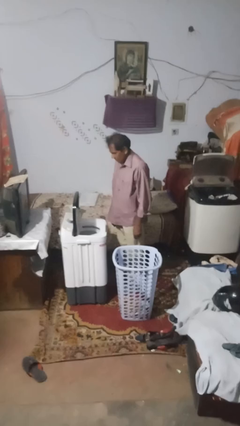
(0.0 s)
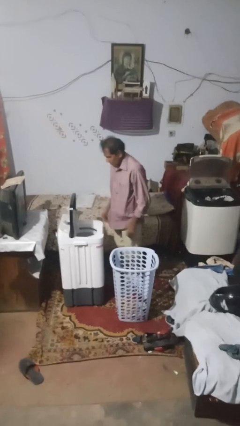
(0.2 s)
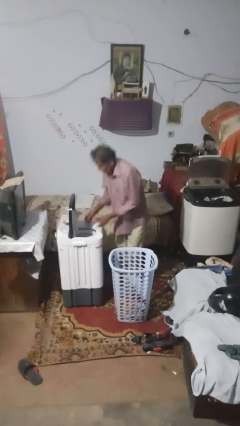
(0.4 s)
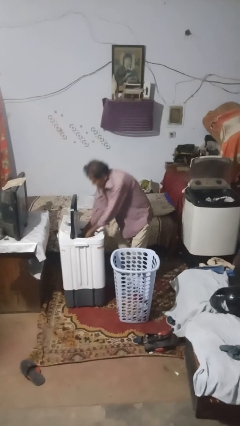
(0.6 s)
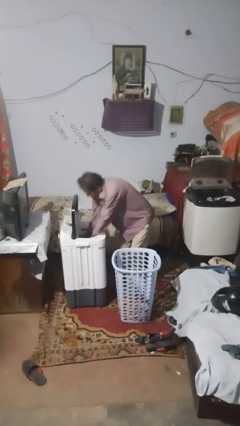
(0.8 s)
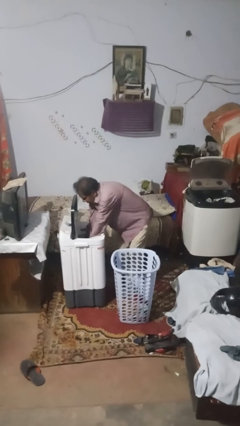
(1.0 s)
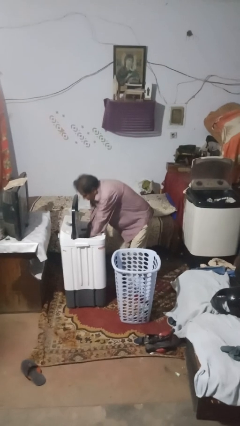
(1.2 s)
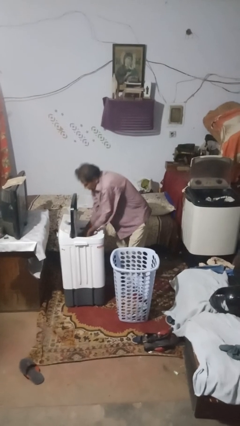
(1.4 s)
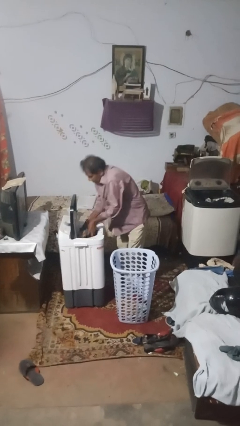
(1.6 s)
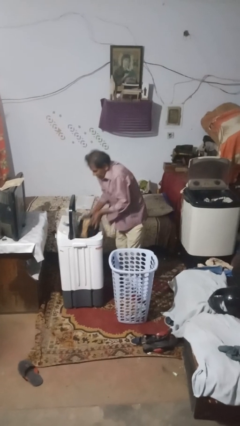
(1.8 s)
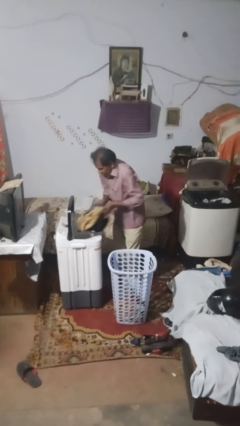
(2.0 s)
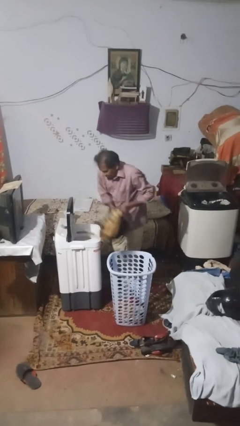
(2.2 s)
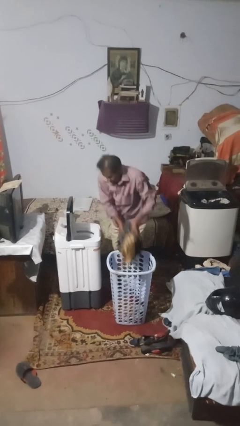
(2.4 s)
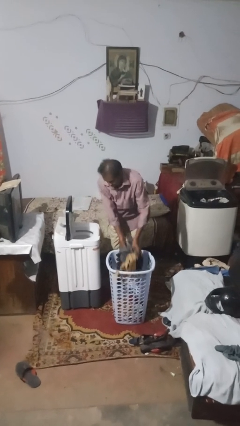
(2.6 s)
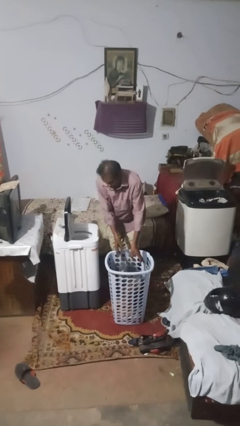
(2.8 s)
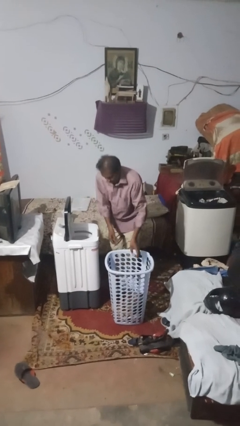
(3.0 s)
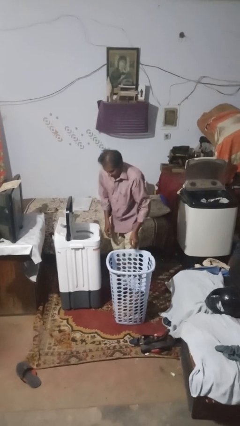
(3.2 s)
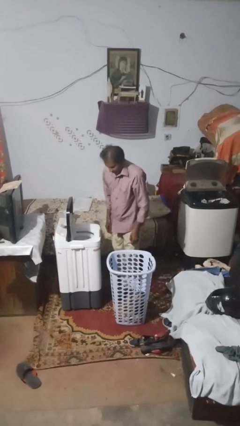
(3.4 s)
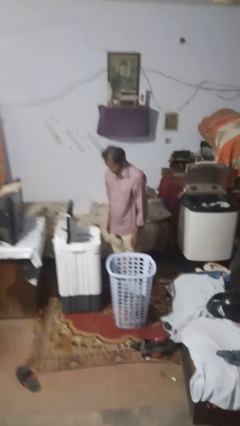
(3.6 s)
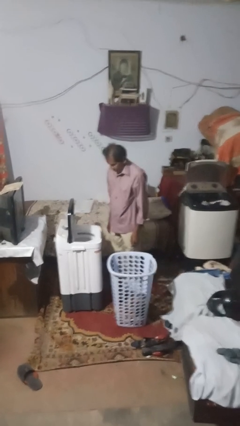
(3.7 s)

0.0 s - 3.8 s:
person loads dryer

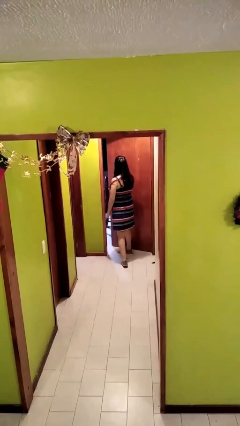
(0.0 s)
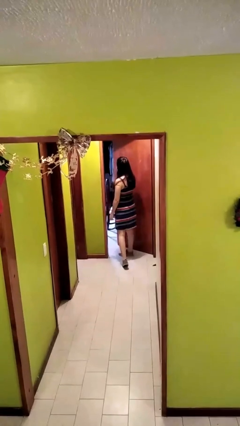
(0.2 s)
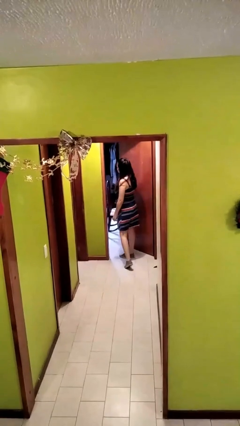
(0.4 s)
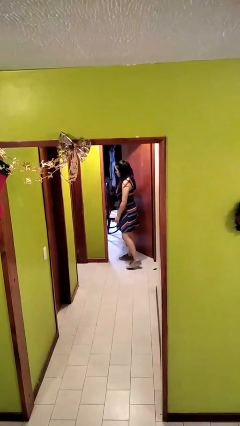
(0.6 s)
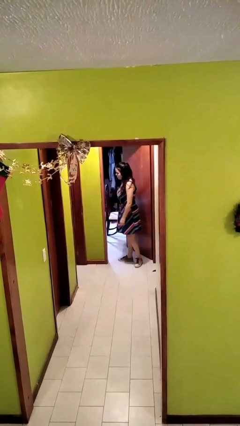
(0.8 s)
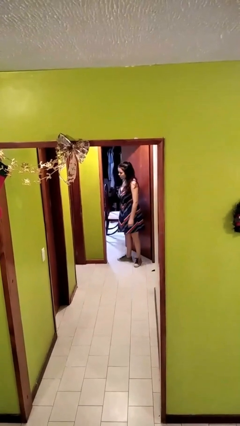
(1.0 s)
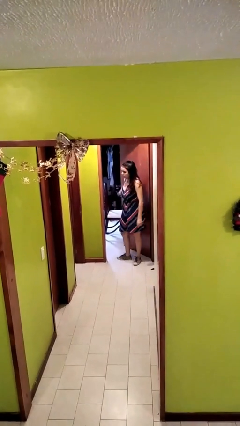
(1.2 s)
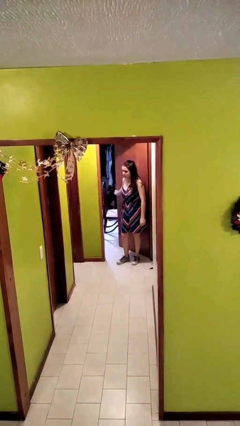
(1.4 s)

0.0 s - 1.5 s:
person opens facility door

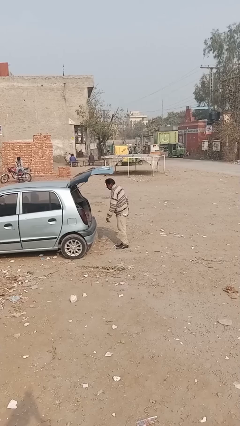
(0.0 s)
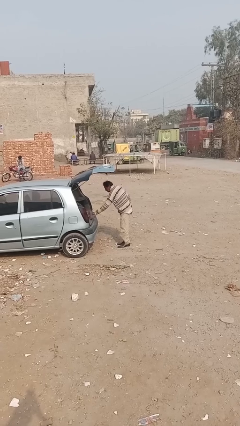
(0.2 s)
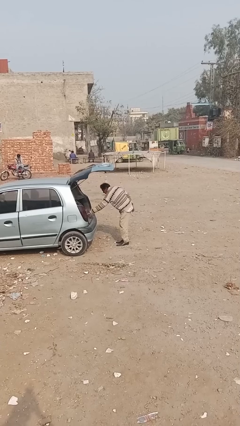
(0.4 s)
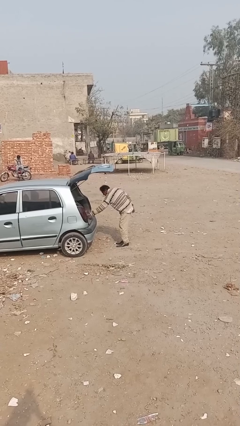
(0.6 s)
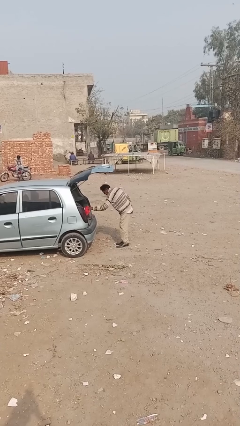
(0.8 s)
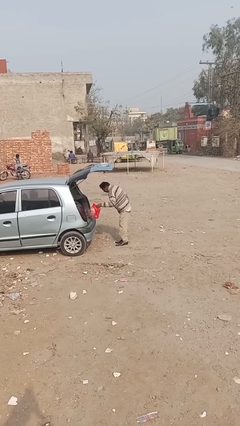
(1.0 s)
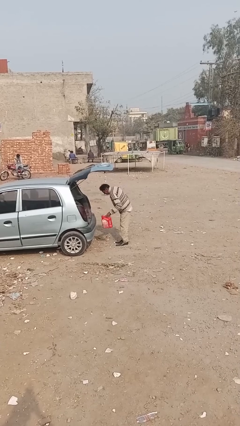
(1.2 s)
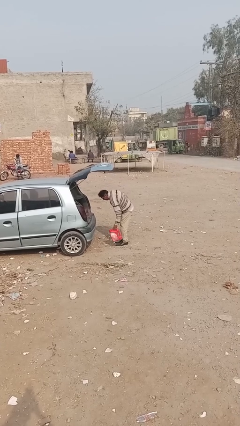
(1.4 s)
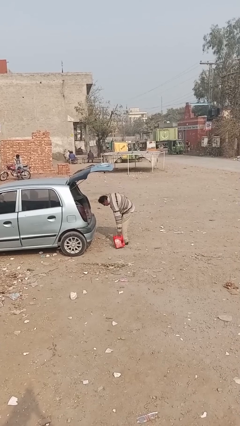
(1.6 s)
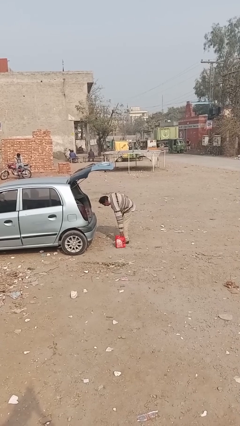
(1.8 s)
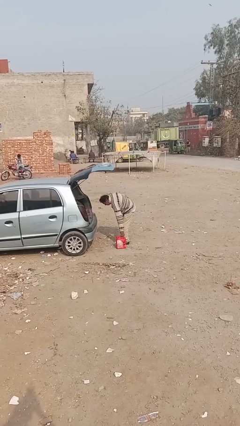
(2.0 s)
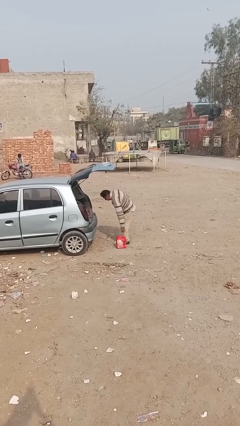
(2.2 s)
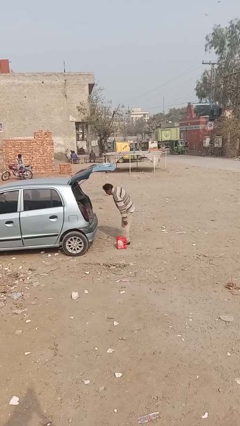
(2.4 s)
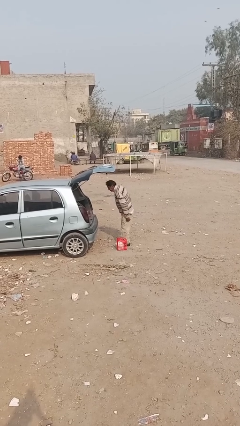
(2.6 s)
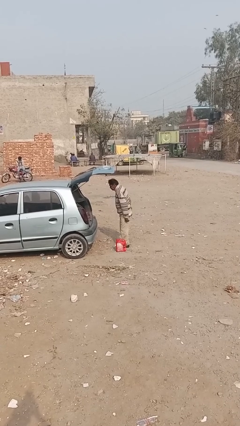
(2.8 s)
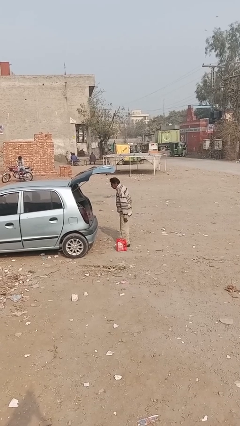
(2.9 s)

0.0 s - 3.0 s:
person unloads car

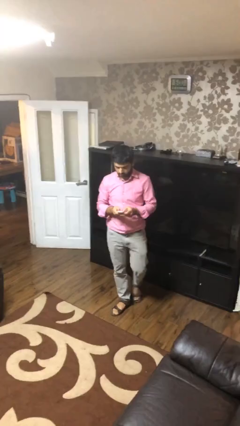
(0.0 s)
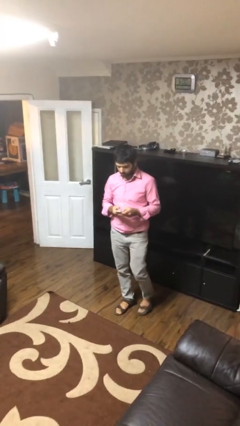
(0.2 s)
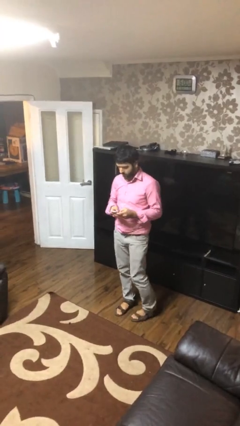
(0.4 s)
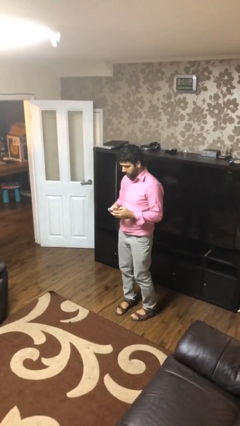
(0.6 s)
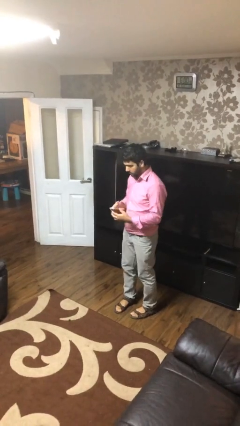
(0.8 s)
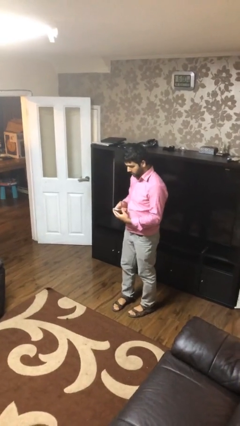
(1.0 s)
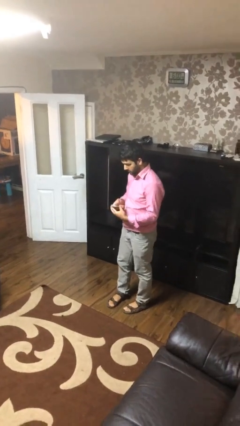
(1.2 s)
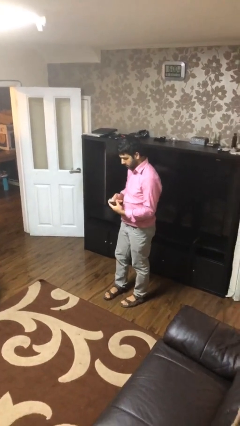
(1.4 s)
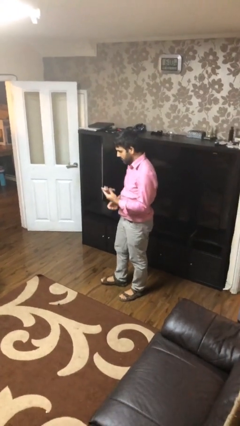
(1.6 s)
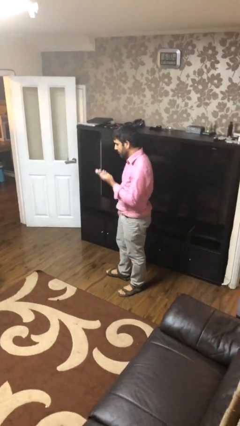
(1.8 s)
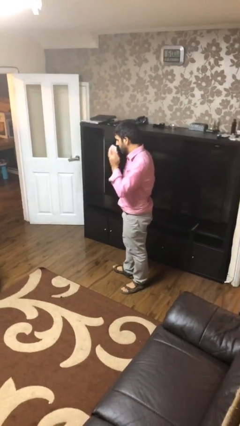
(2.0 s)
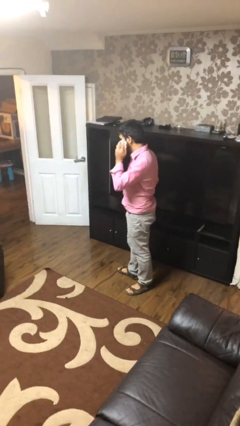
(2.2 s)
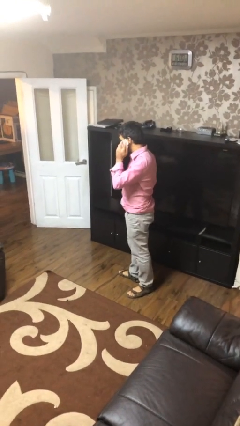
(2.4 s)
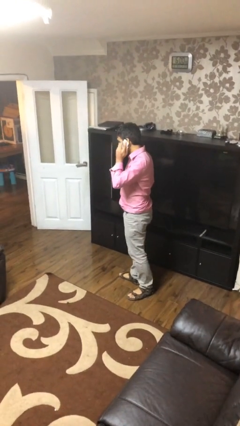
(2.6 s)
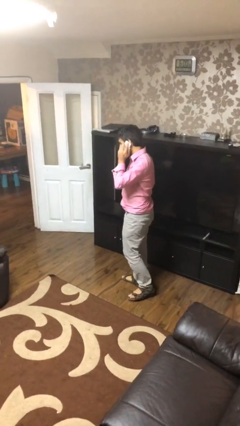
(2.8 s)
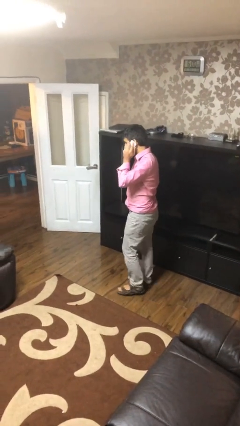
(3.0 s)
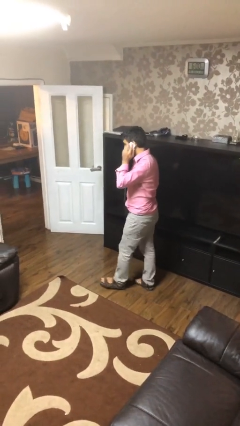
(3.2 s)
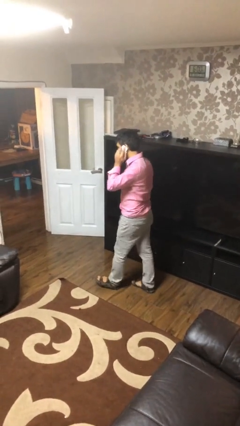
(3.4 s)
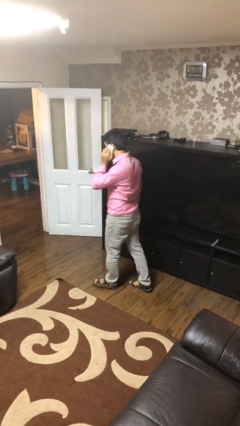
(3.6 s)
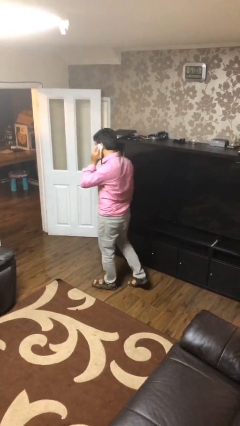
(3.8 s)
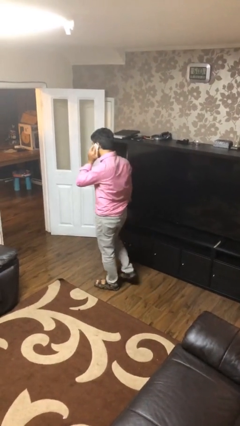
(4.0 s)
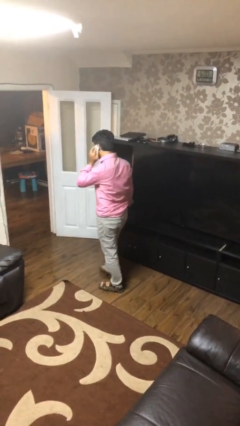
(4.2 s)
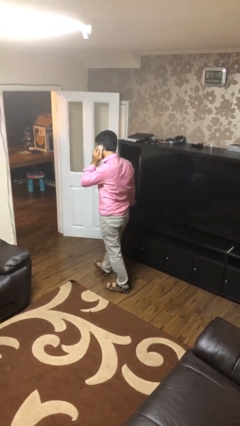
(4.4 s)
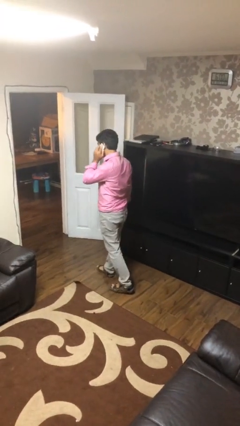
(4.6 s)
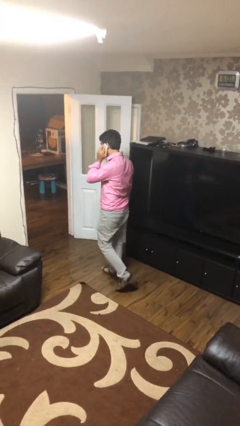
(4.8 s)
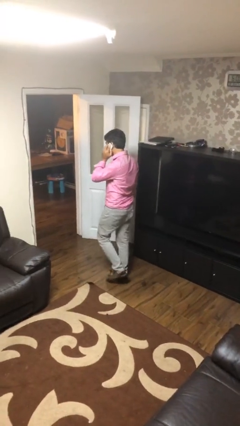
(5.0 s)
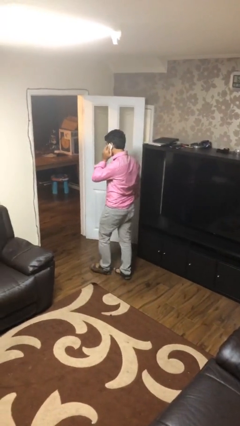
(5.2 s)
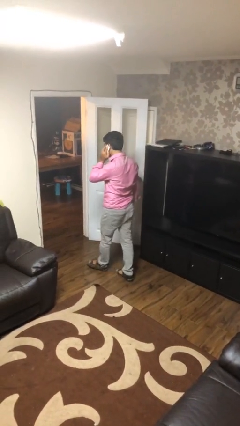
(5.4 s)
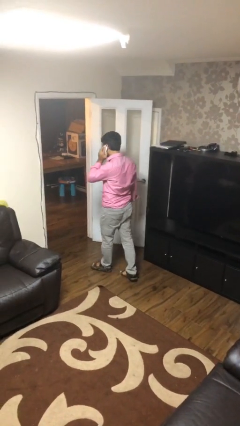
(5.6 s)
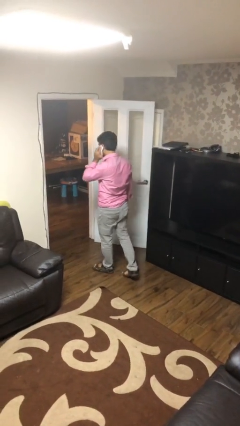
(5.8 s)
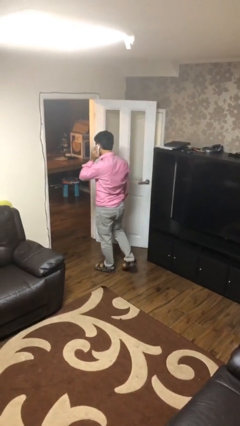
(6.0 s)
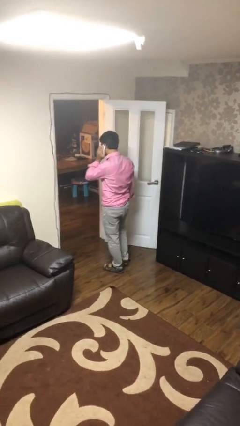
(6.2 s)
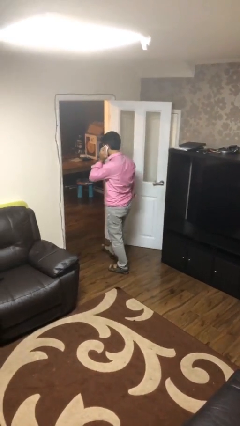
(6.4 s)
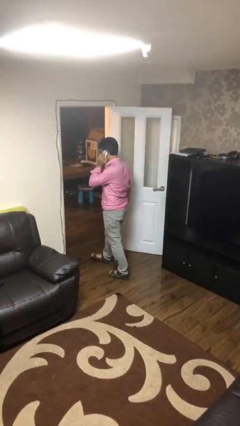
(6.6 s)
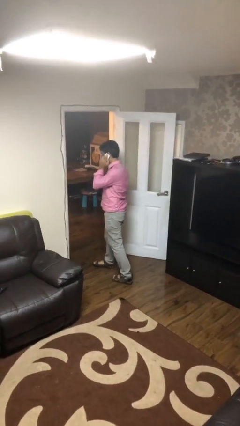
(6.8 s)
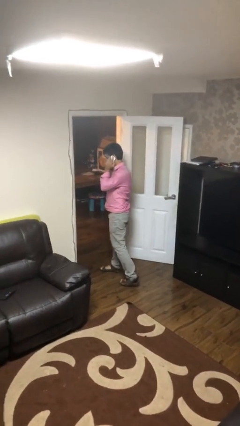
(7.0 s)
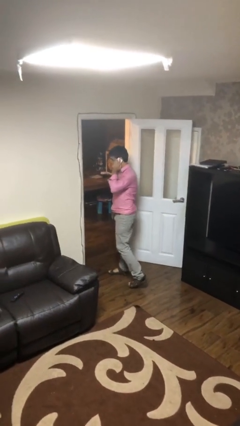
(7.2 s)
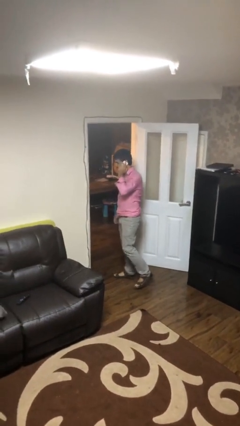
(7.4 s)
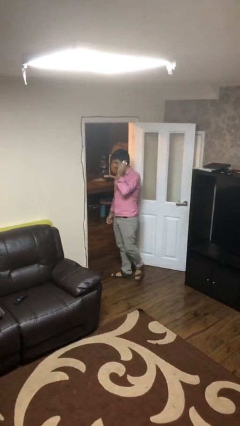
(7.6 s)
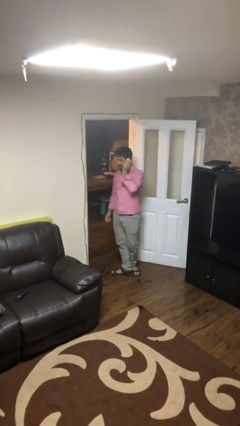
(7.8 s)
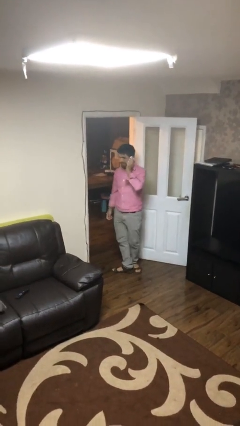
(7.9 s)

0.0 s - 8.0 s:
person talks on phone

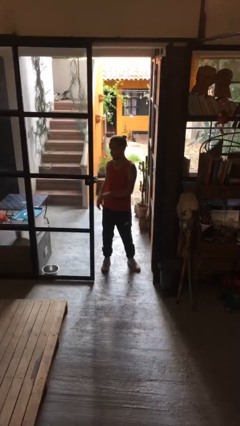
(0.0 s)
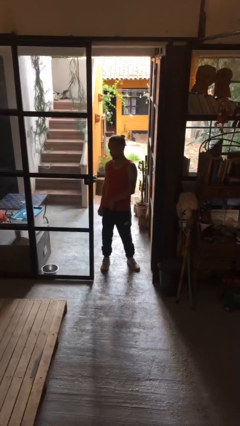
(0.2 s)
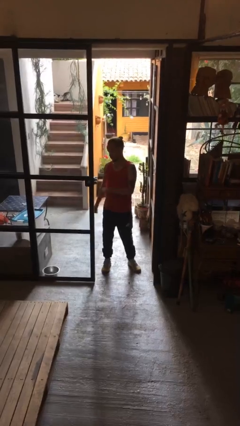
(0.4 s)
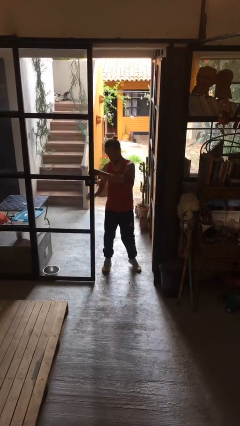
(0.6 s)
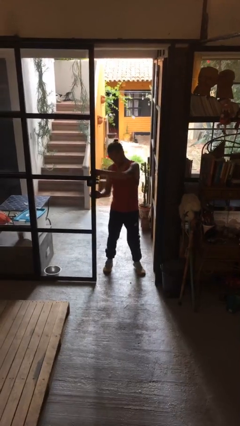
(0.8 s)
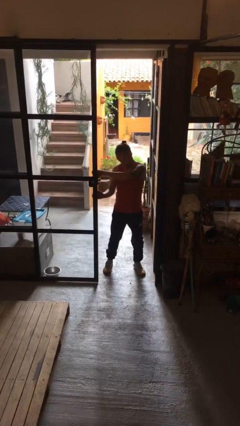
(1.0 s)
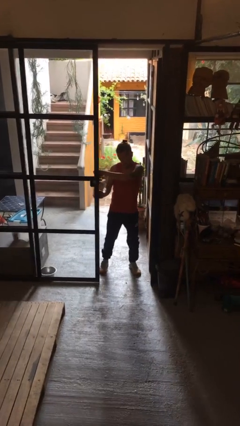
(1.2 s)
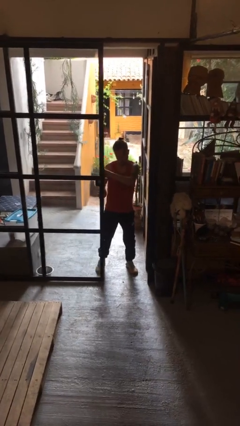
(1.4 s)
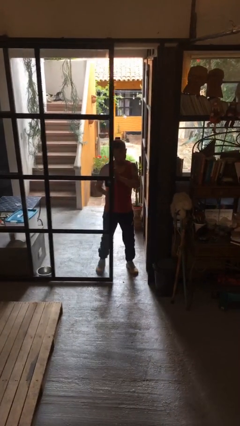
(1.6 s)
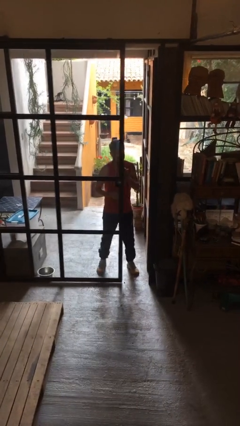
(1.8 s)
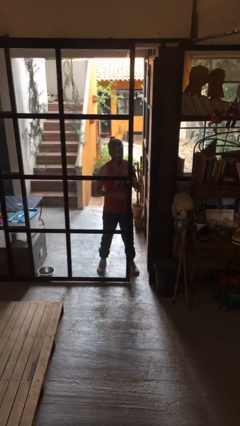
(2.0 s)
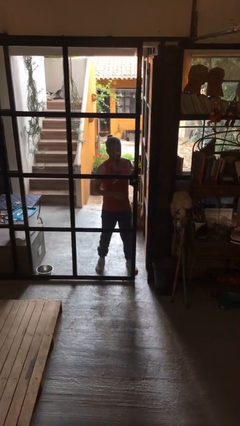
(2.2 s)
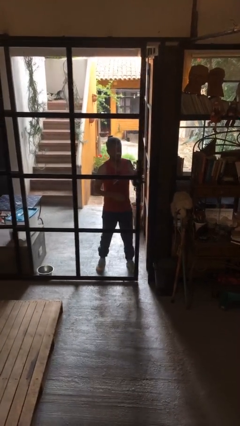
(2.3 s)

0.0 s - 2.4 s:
person closes sliding door
